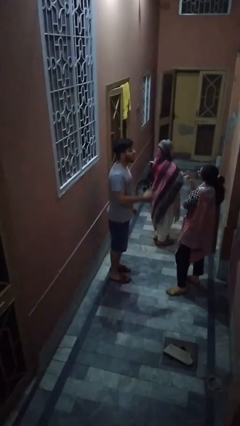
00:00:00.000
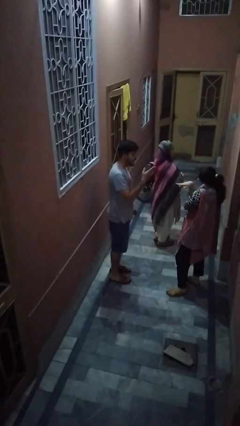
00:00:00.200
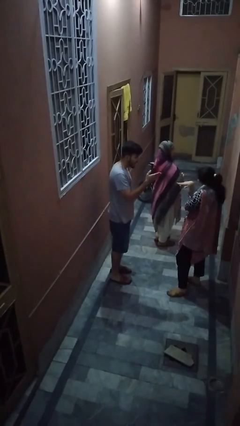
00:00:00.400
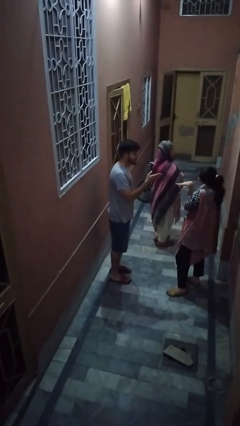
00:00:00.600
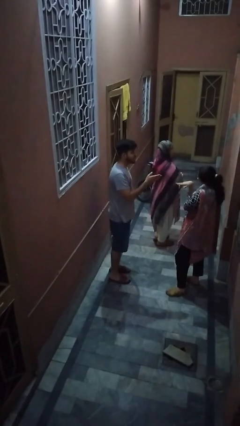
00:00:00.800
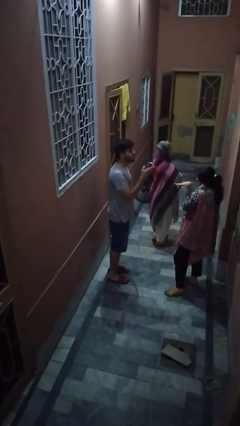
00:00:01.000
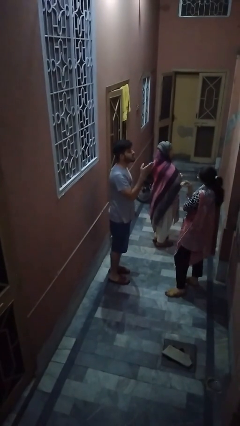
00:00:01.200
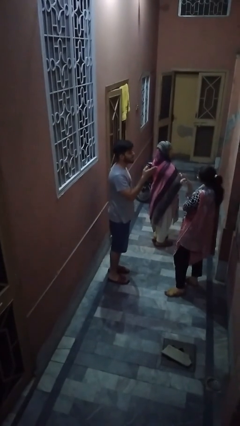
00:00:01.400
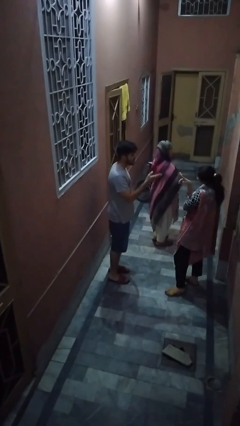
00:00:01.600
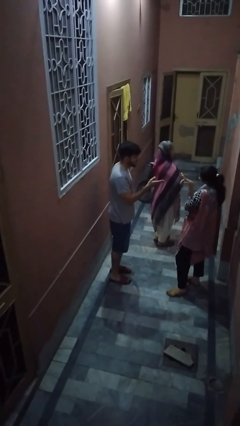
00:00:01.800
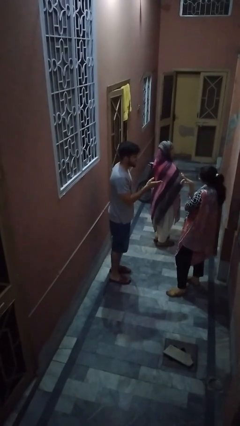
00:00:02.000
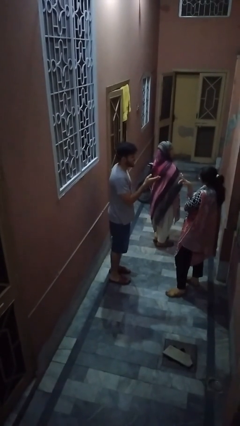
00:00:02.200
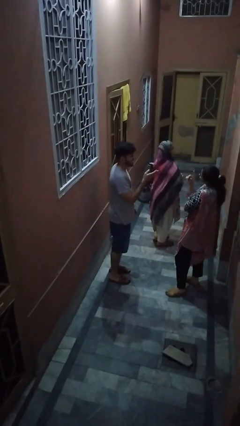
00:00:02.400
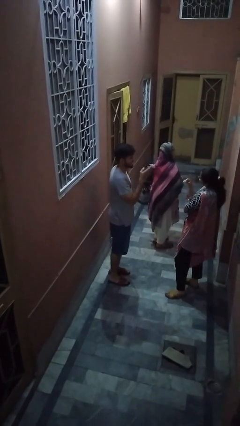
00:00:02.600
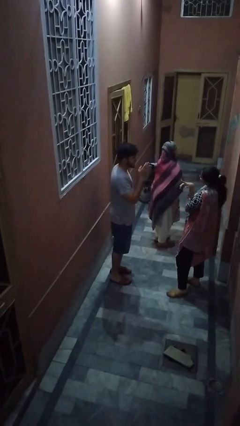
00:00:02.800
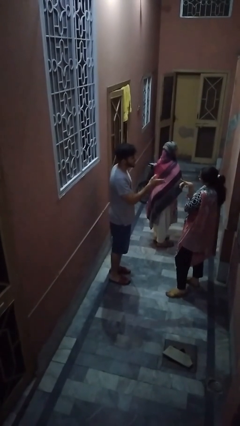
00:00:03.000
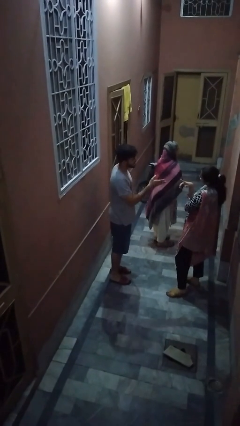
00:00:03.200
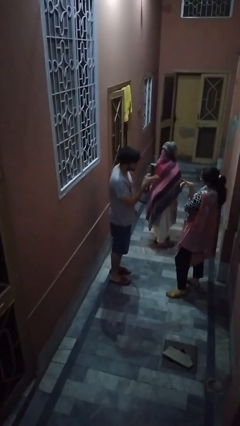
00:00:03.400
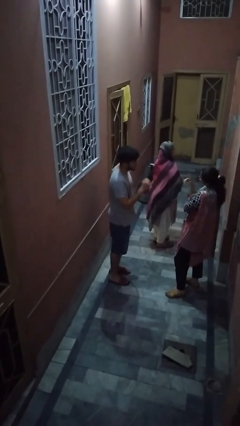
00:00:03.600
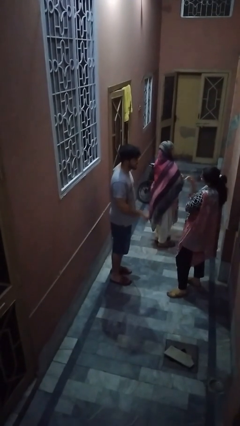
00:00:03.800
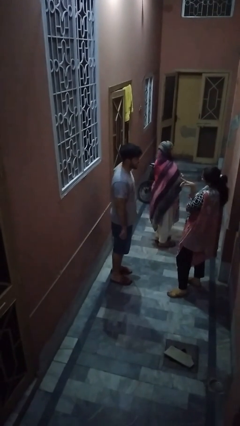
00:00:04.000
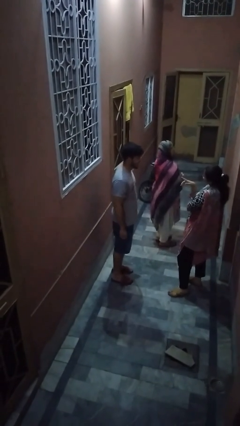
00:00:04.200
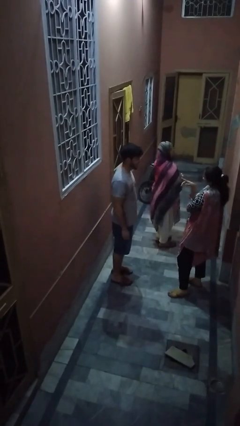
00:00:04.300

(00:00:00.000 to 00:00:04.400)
person talks to person

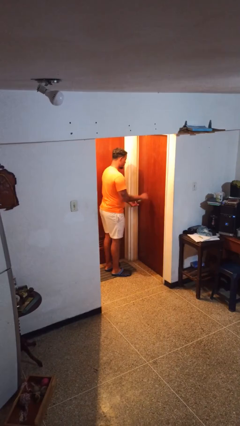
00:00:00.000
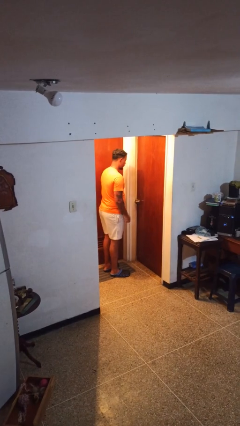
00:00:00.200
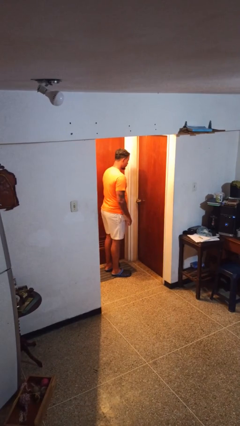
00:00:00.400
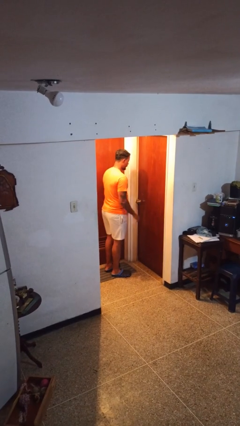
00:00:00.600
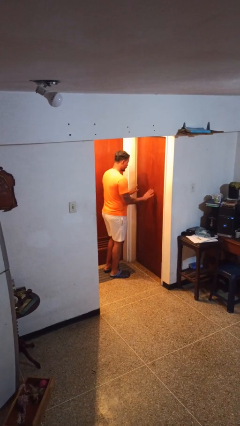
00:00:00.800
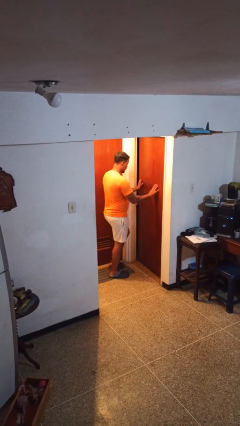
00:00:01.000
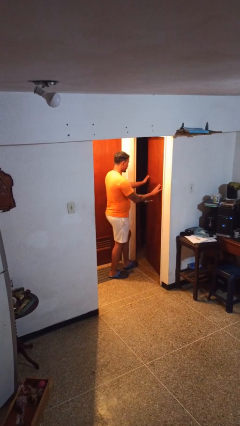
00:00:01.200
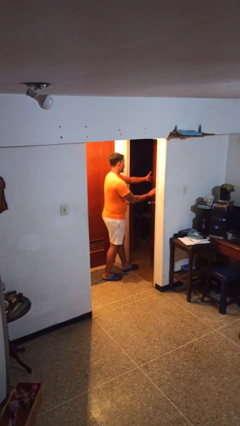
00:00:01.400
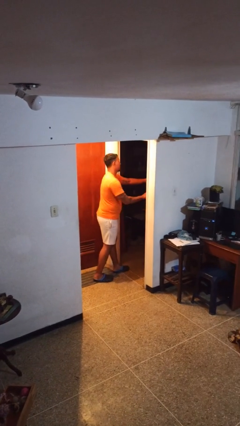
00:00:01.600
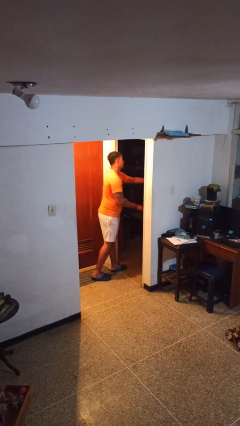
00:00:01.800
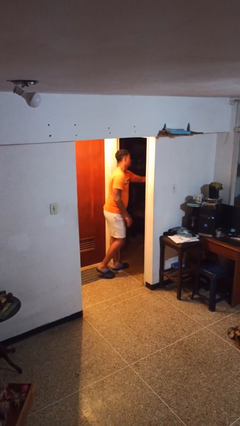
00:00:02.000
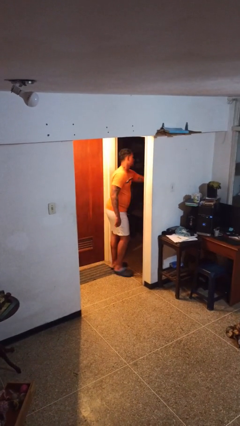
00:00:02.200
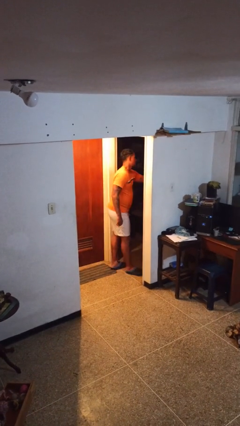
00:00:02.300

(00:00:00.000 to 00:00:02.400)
person opens facility door

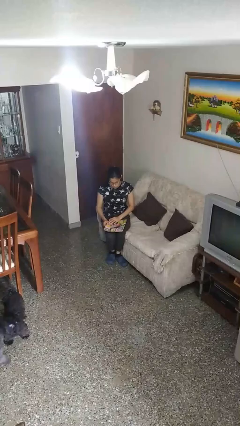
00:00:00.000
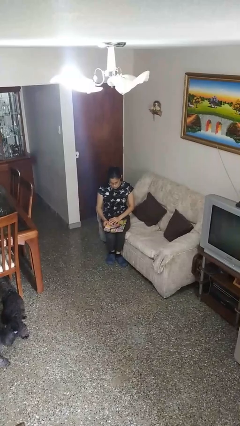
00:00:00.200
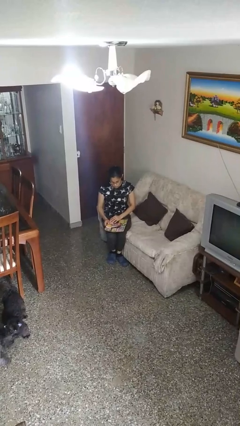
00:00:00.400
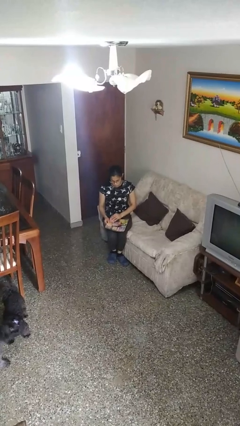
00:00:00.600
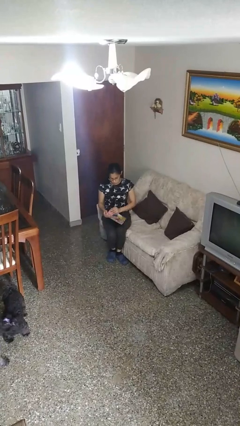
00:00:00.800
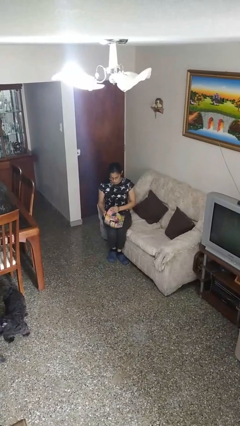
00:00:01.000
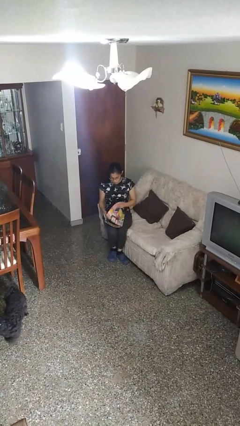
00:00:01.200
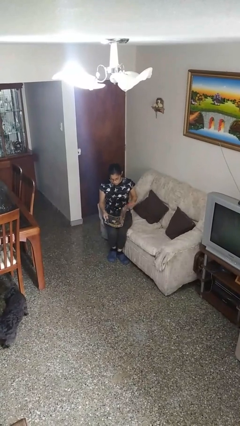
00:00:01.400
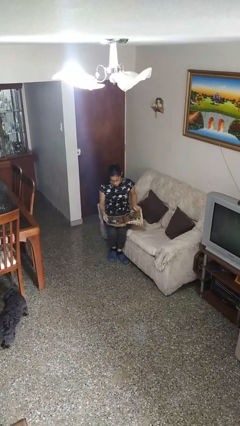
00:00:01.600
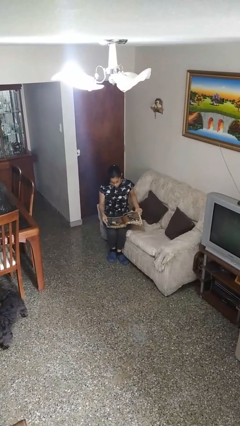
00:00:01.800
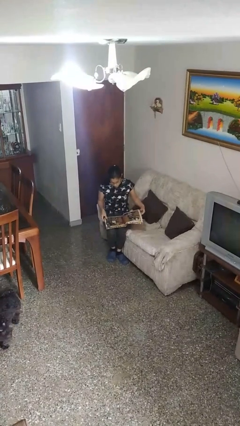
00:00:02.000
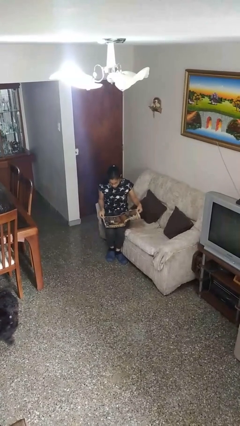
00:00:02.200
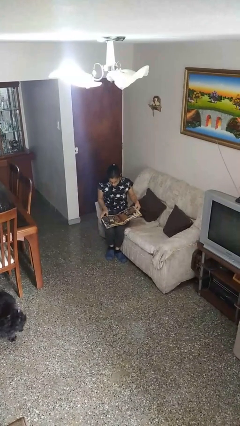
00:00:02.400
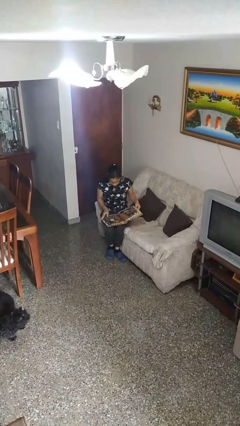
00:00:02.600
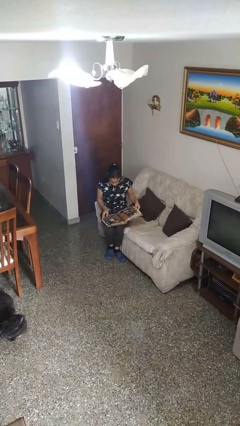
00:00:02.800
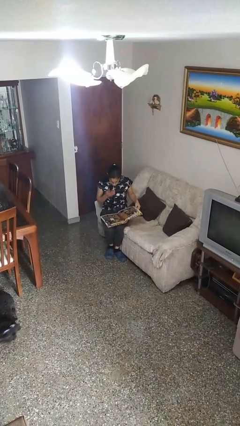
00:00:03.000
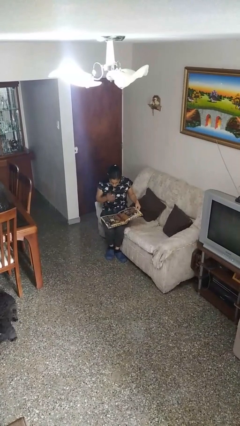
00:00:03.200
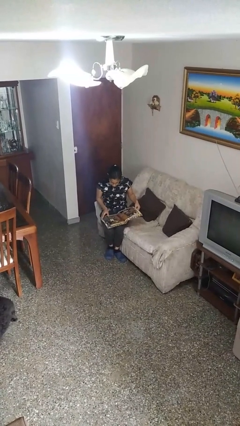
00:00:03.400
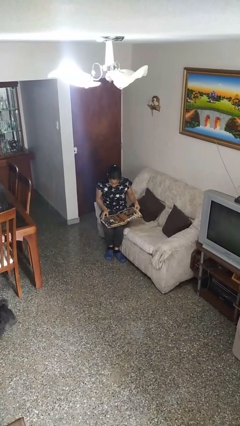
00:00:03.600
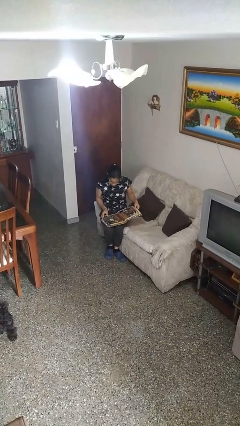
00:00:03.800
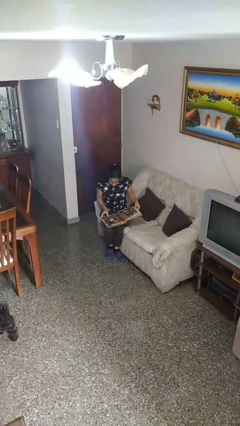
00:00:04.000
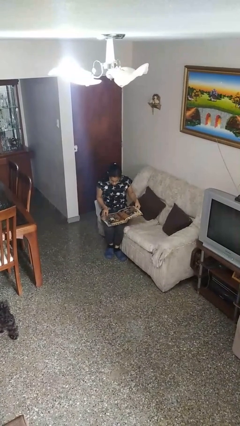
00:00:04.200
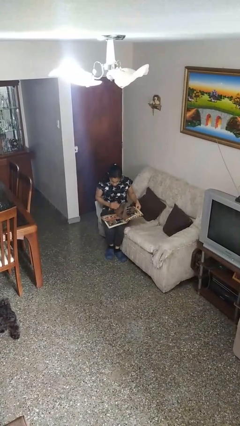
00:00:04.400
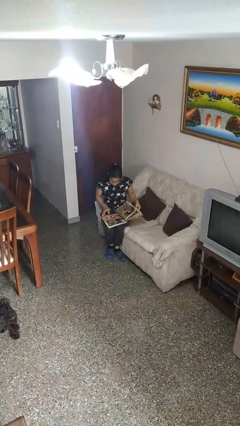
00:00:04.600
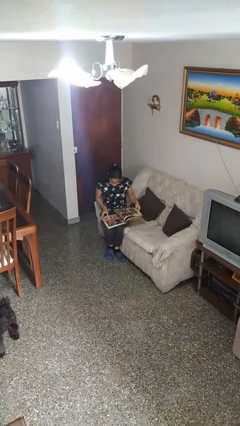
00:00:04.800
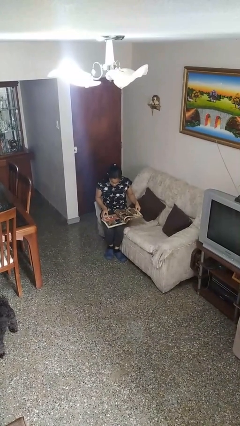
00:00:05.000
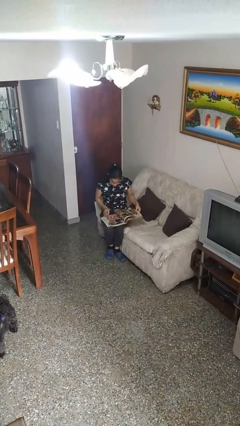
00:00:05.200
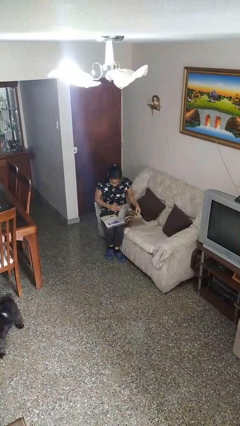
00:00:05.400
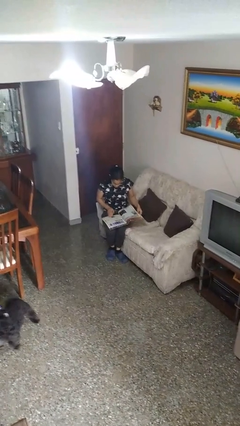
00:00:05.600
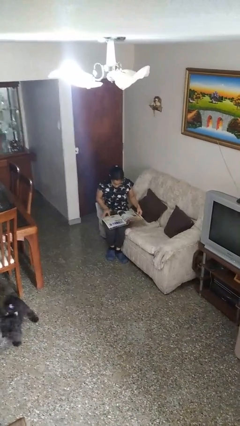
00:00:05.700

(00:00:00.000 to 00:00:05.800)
person reads magazine

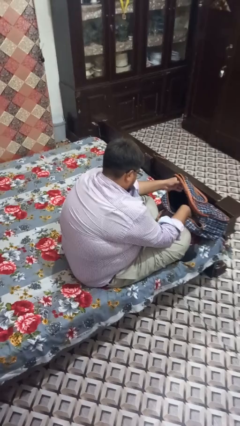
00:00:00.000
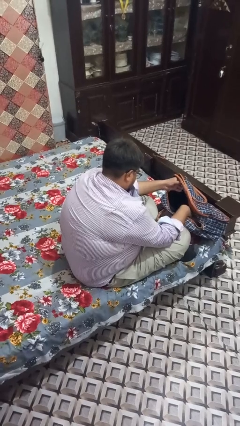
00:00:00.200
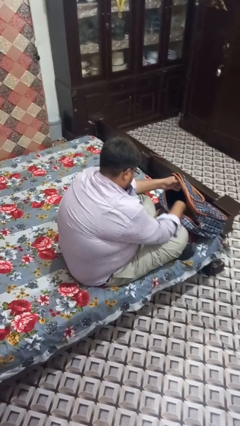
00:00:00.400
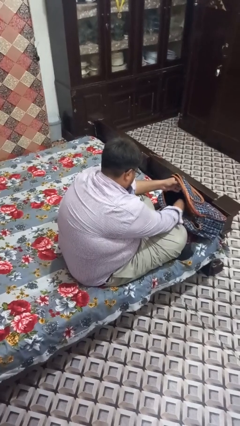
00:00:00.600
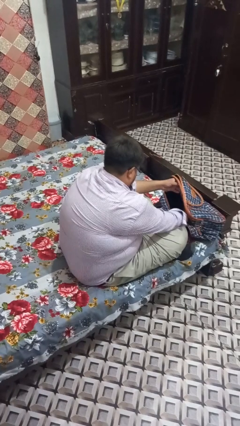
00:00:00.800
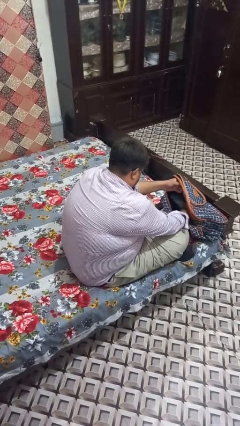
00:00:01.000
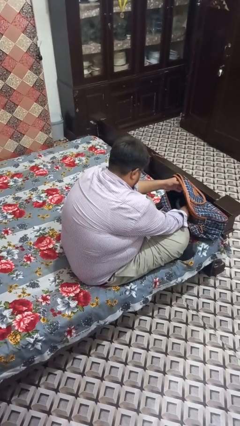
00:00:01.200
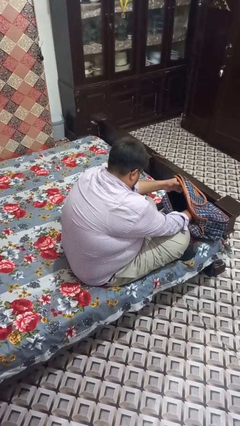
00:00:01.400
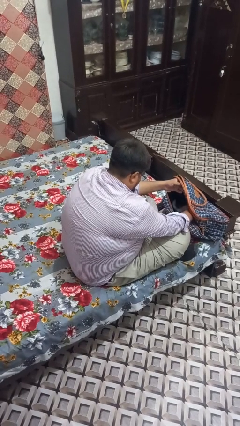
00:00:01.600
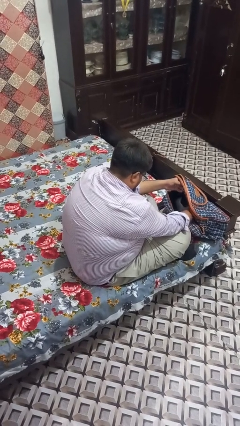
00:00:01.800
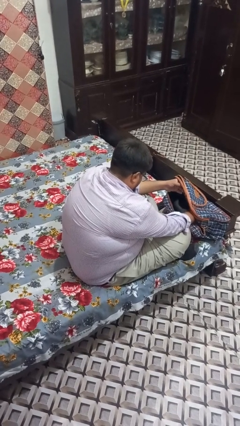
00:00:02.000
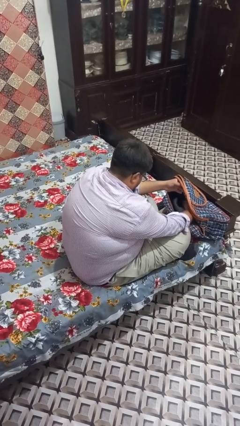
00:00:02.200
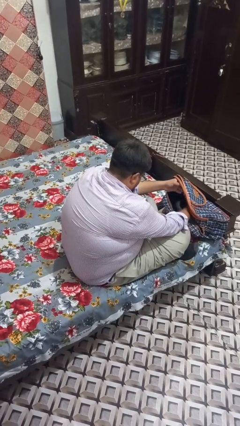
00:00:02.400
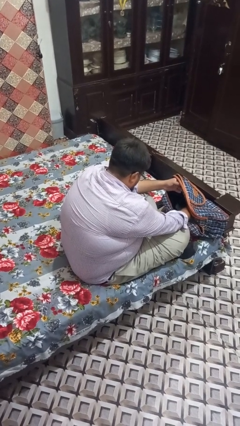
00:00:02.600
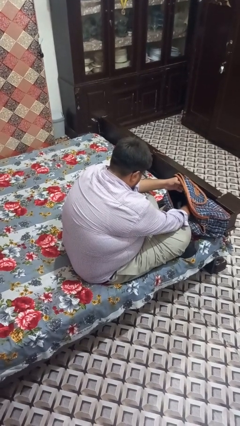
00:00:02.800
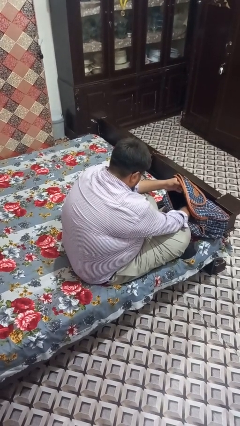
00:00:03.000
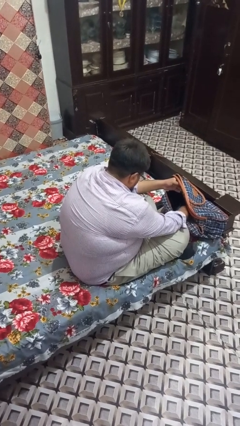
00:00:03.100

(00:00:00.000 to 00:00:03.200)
person searches in backpack

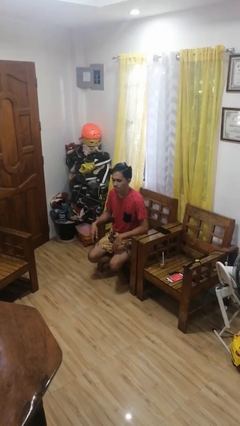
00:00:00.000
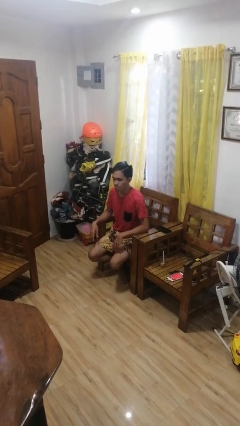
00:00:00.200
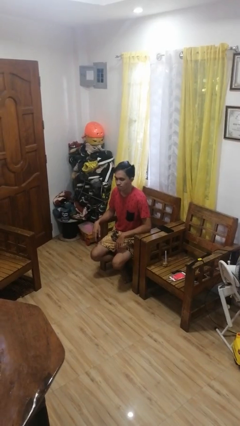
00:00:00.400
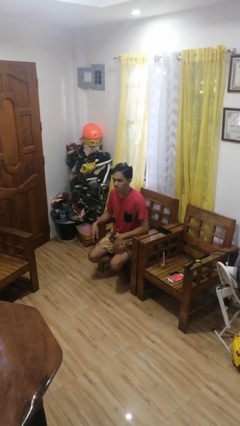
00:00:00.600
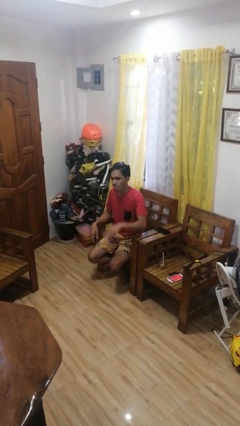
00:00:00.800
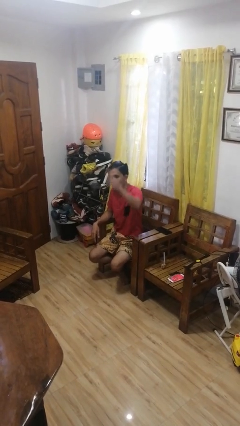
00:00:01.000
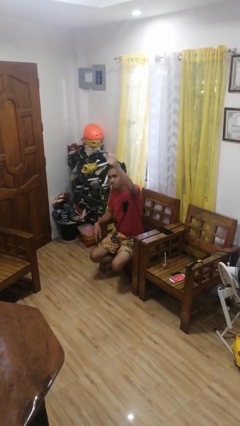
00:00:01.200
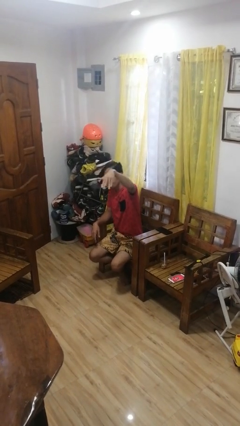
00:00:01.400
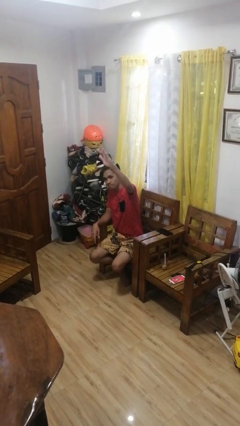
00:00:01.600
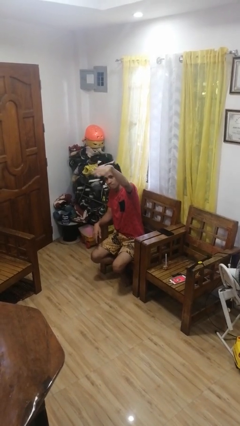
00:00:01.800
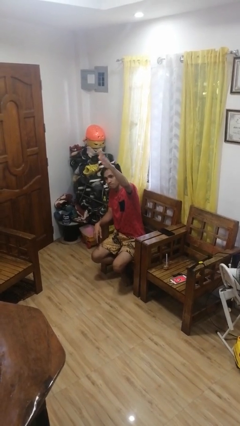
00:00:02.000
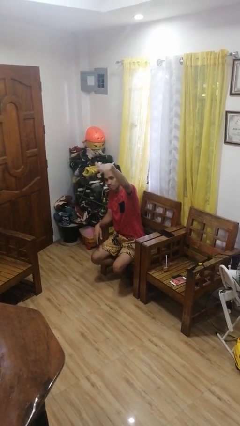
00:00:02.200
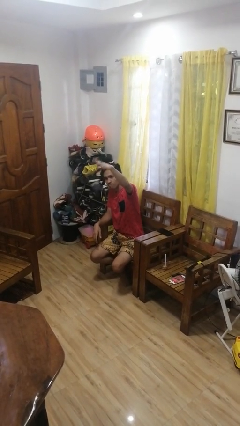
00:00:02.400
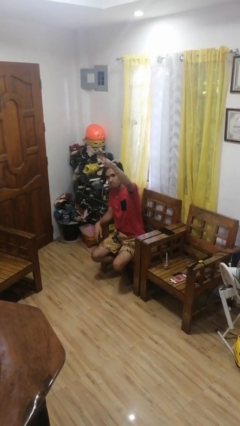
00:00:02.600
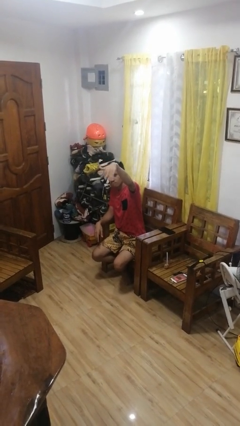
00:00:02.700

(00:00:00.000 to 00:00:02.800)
person gestures come here
